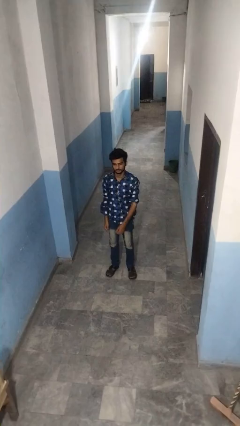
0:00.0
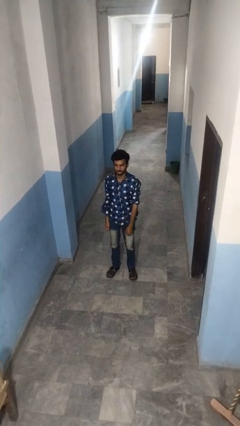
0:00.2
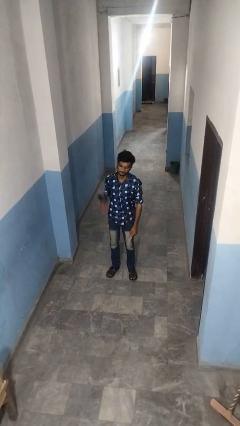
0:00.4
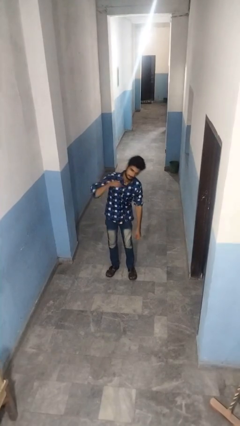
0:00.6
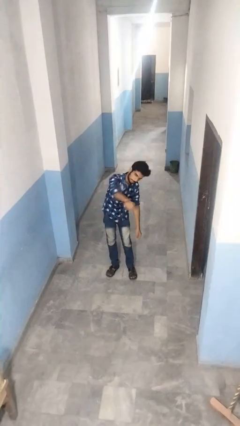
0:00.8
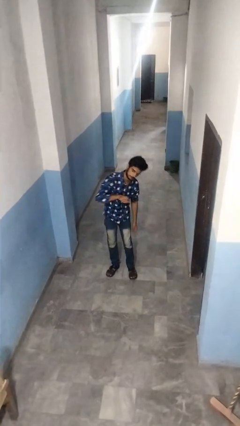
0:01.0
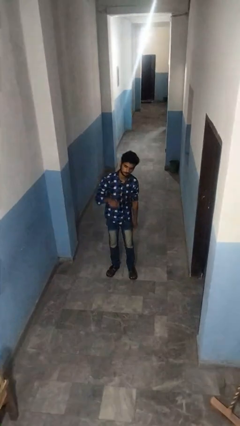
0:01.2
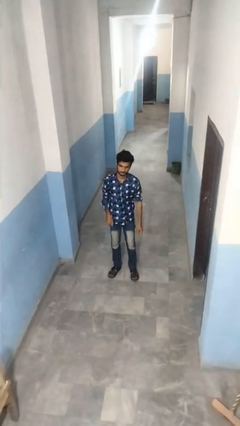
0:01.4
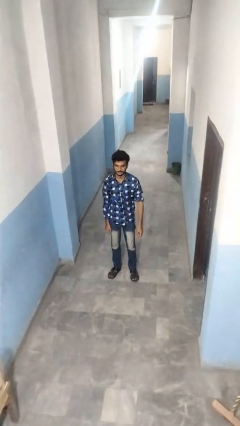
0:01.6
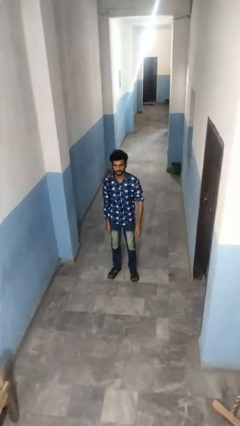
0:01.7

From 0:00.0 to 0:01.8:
person punches

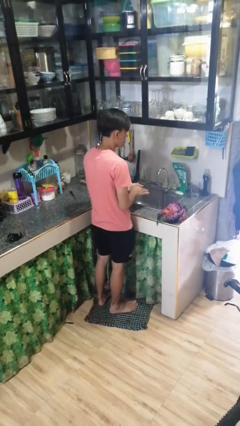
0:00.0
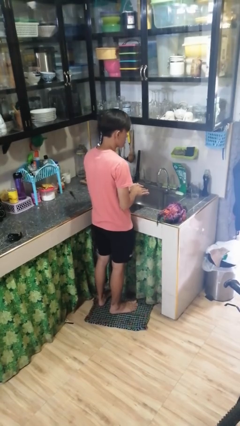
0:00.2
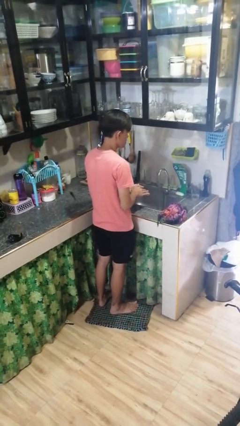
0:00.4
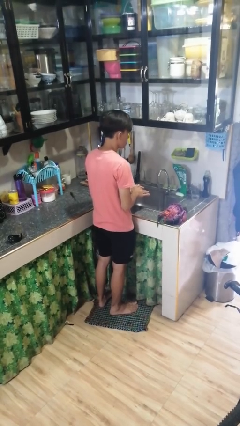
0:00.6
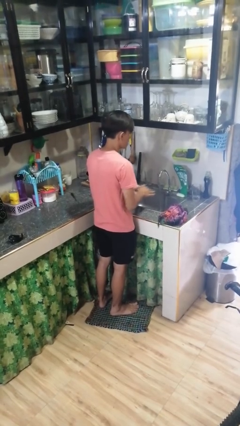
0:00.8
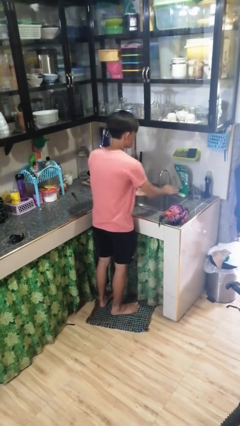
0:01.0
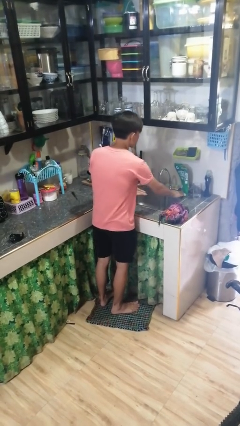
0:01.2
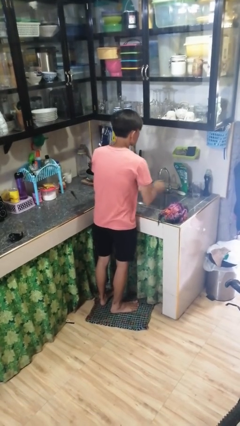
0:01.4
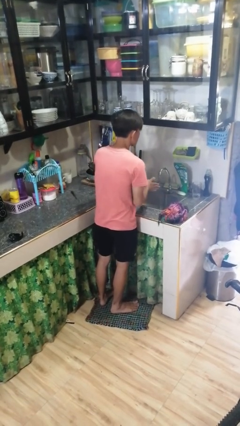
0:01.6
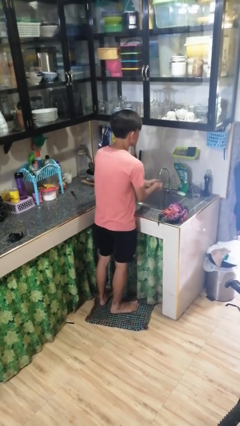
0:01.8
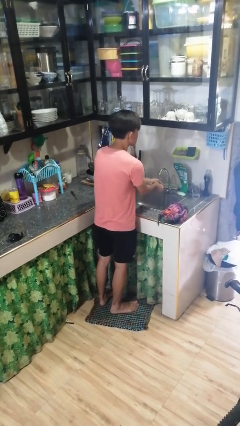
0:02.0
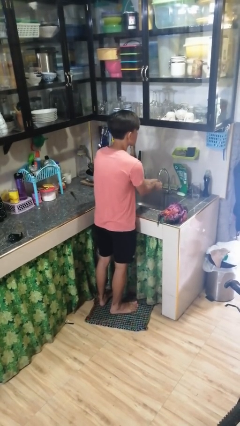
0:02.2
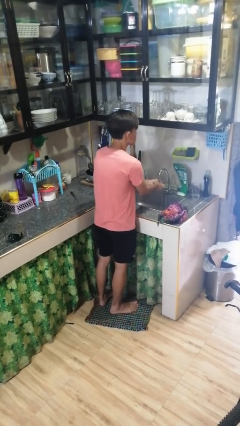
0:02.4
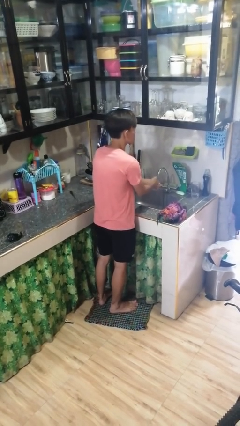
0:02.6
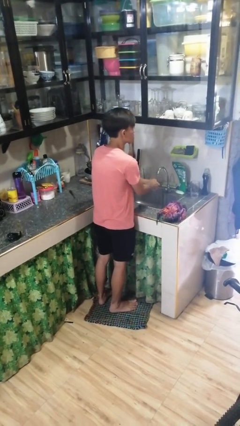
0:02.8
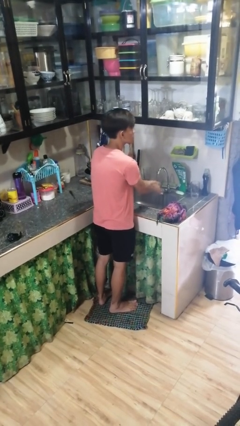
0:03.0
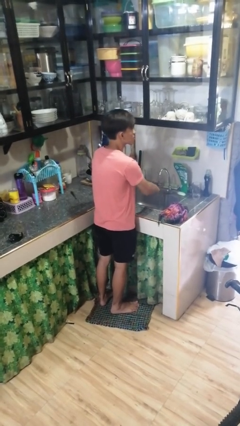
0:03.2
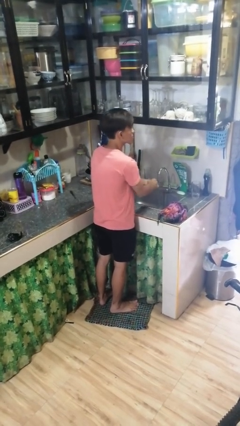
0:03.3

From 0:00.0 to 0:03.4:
person washes hands

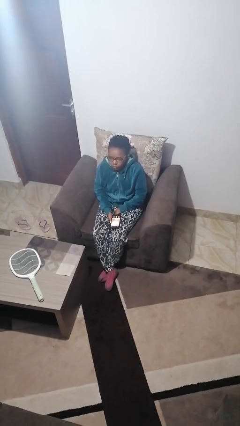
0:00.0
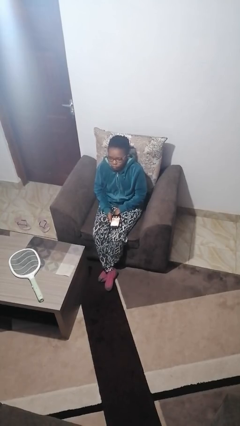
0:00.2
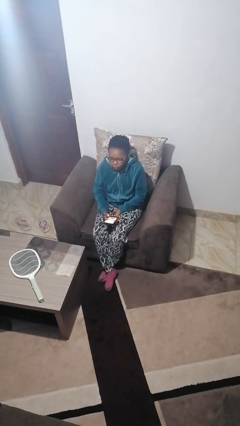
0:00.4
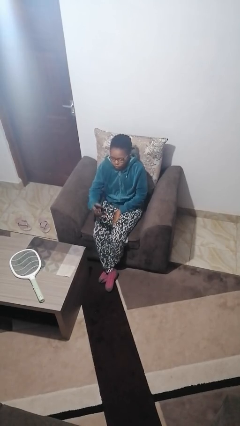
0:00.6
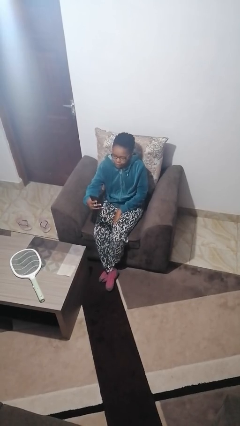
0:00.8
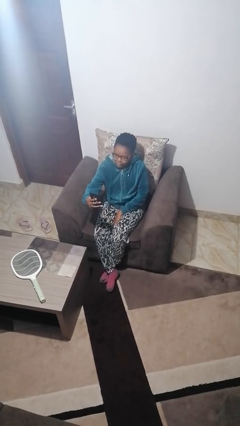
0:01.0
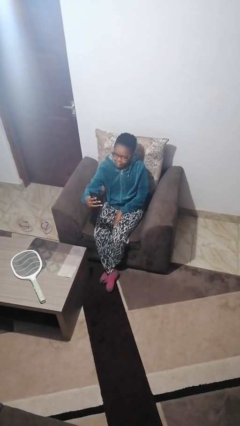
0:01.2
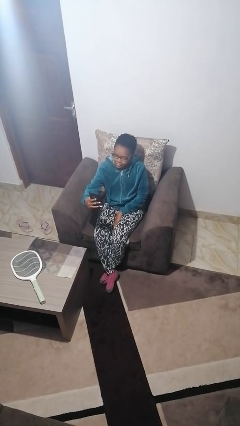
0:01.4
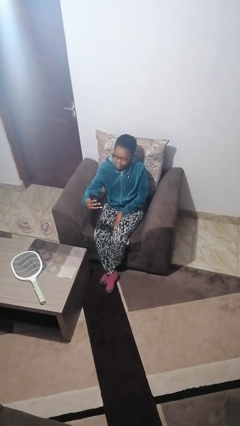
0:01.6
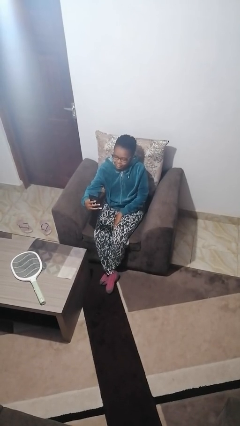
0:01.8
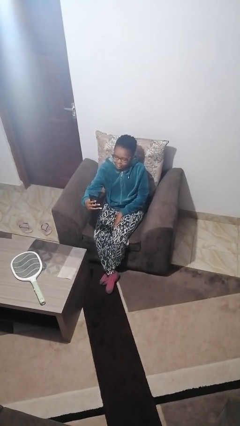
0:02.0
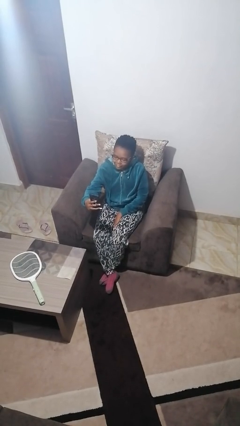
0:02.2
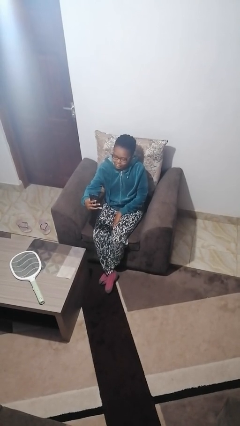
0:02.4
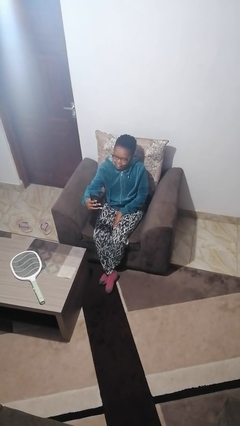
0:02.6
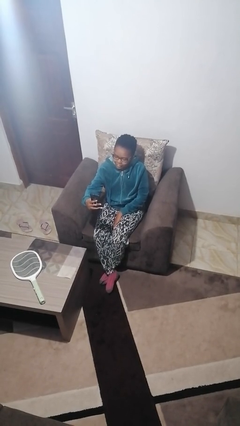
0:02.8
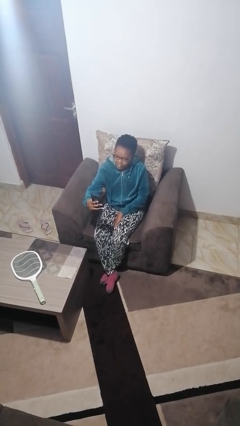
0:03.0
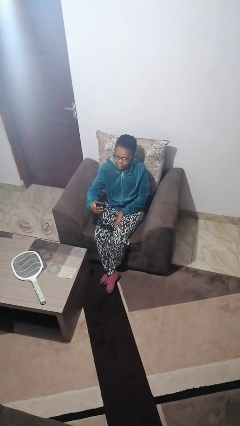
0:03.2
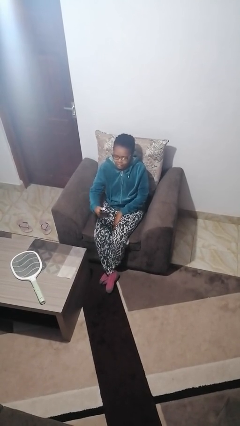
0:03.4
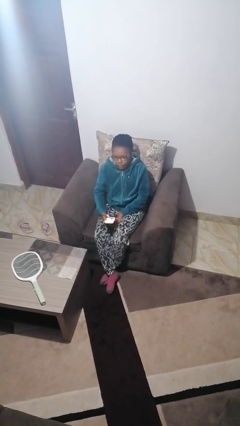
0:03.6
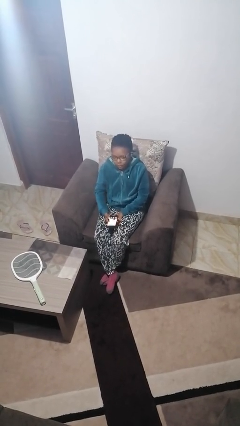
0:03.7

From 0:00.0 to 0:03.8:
person takes selfie

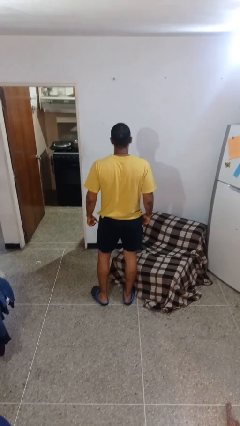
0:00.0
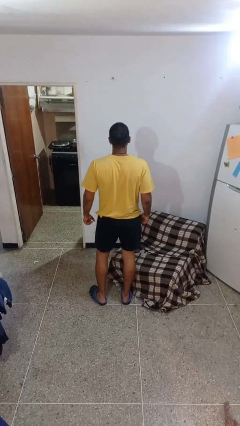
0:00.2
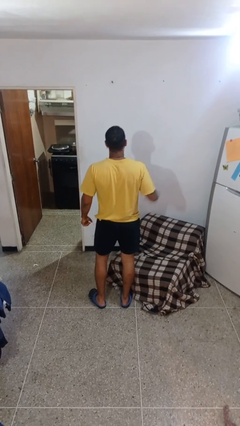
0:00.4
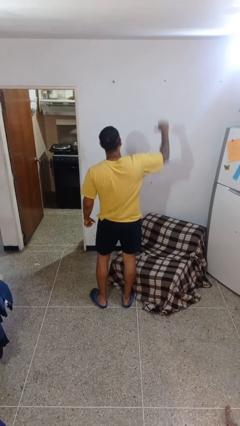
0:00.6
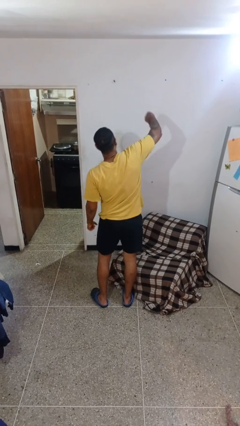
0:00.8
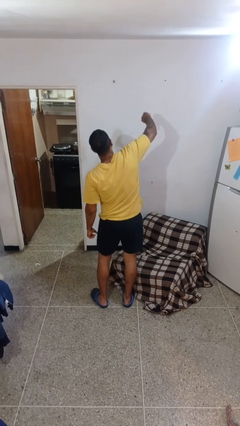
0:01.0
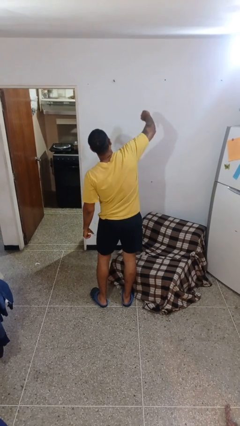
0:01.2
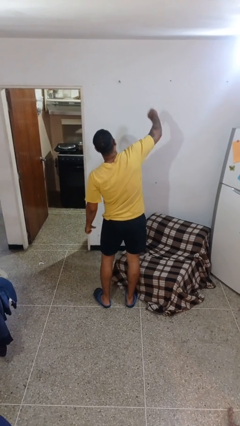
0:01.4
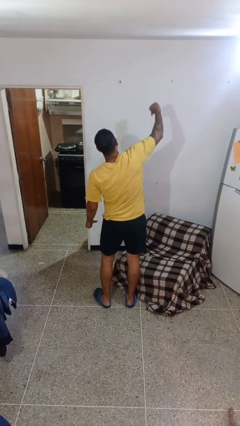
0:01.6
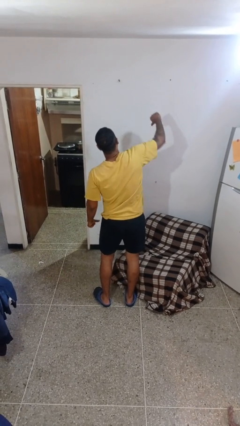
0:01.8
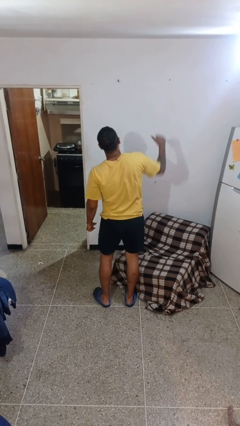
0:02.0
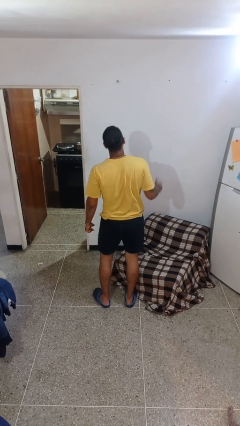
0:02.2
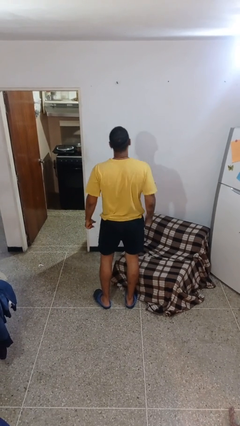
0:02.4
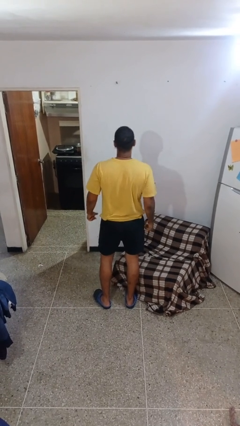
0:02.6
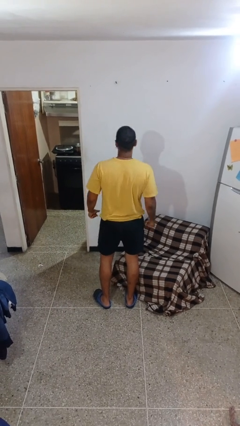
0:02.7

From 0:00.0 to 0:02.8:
person gestures thumbs down

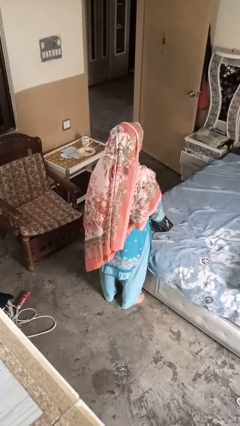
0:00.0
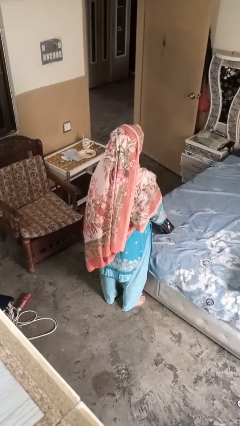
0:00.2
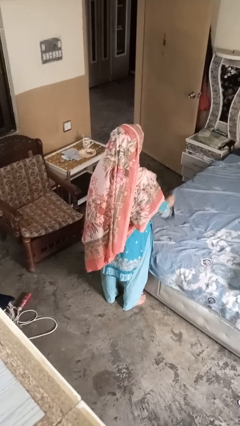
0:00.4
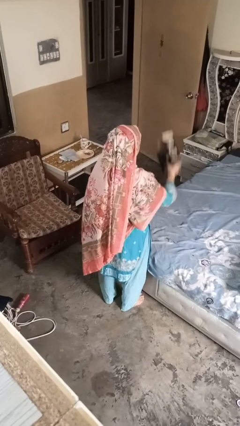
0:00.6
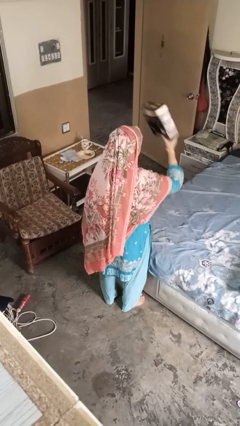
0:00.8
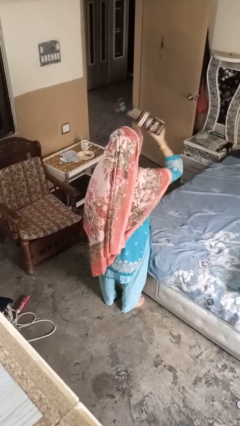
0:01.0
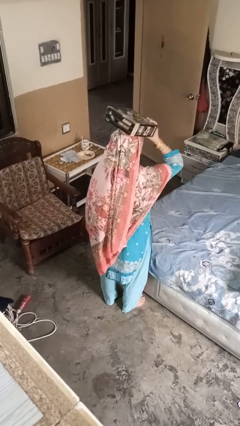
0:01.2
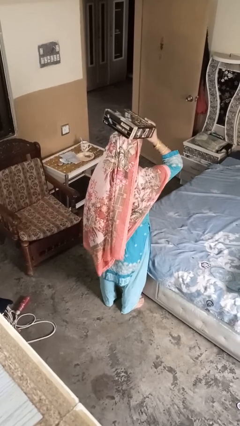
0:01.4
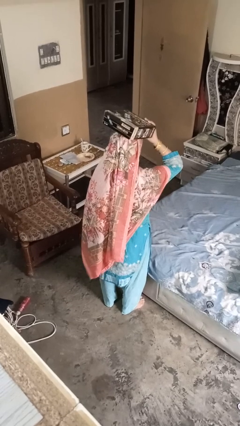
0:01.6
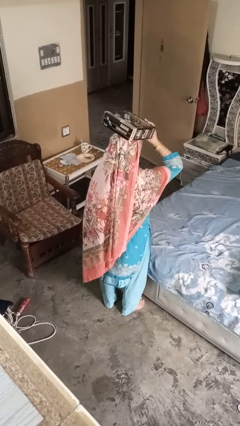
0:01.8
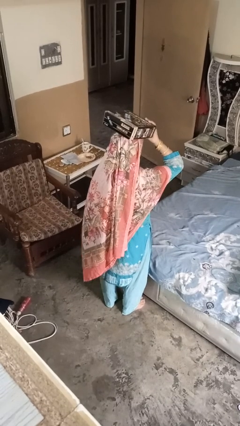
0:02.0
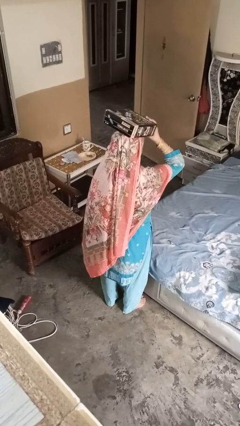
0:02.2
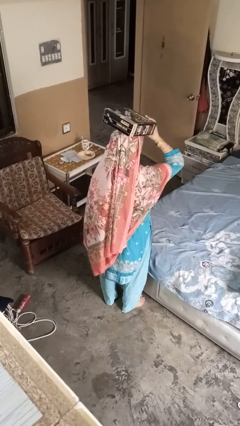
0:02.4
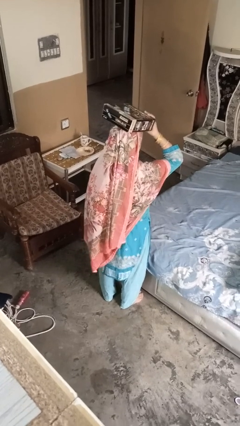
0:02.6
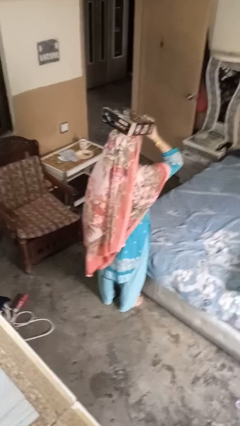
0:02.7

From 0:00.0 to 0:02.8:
person holds object above head

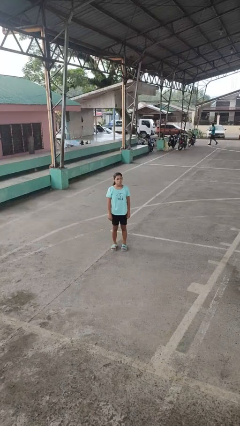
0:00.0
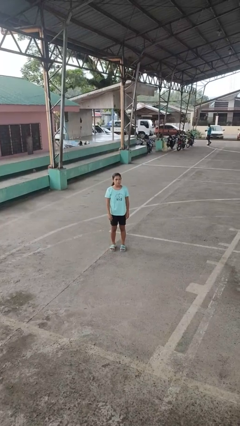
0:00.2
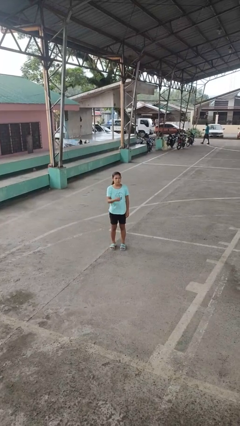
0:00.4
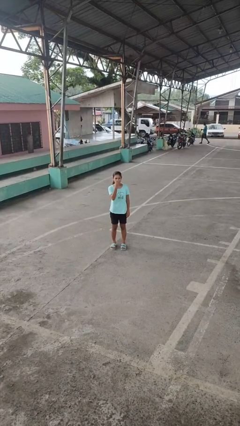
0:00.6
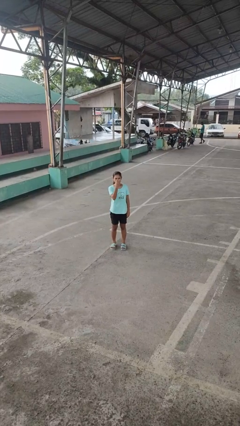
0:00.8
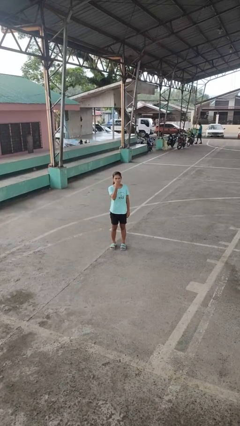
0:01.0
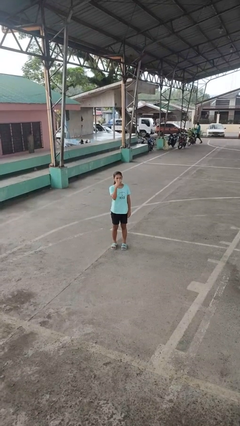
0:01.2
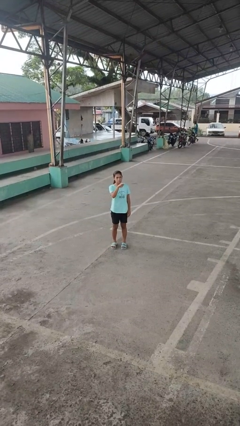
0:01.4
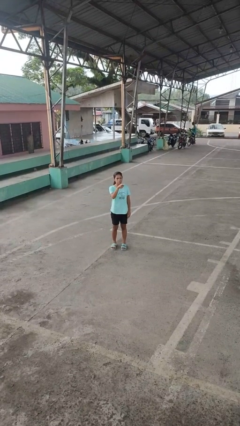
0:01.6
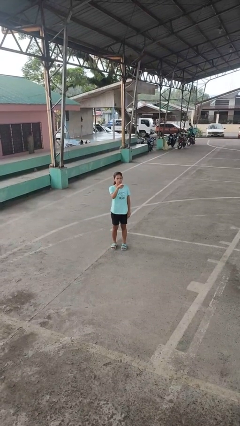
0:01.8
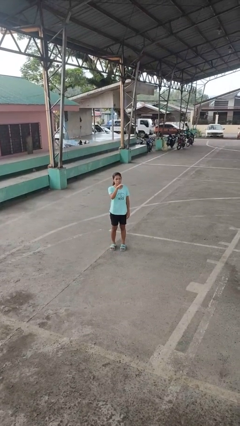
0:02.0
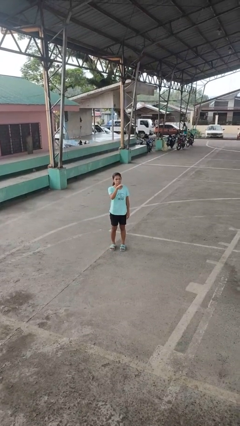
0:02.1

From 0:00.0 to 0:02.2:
person gestures watch closely

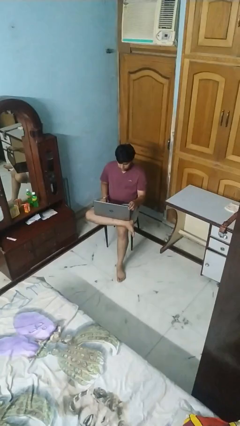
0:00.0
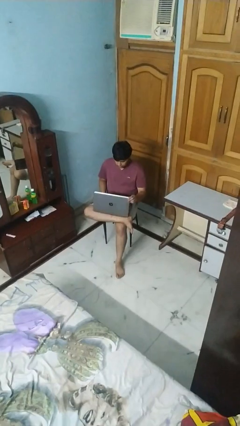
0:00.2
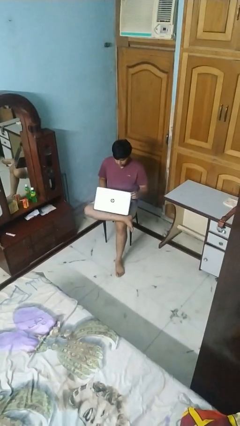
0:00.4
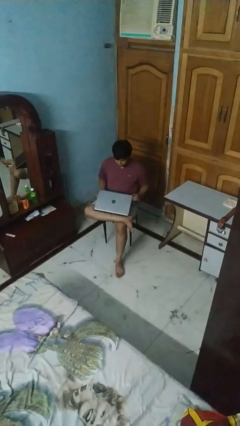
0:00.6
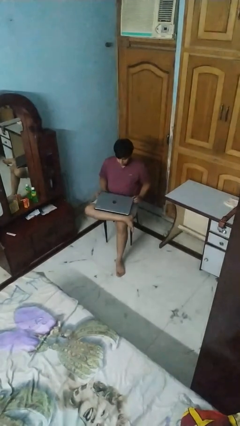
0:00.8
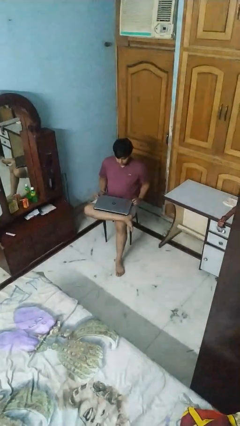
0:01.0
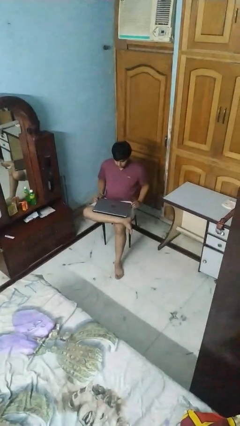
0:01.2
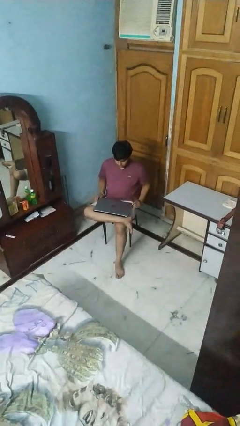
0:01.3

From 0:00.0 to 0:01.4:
person closes laptop
